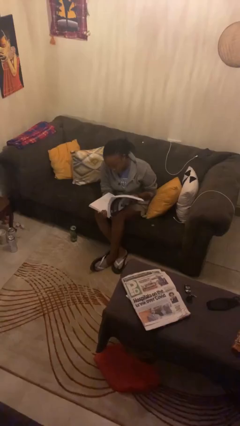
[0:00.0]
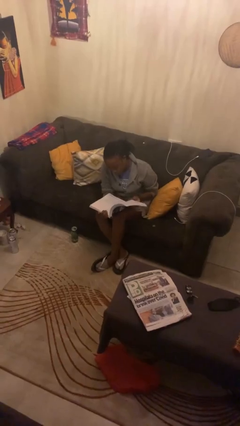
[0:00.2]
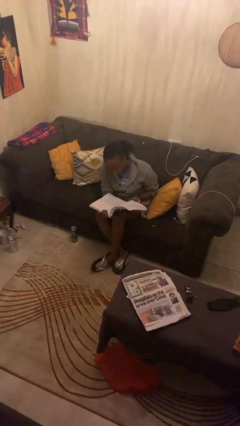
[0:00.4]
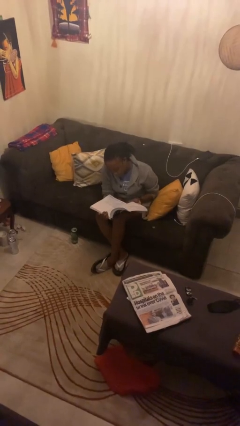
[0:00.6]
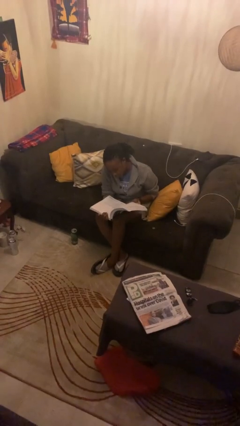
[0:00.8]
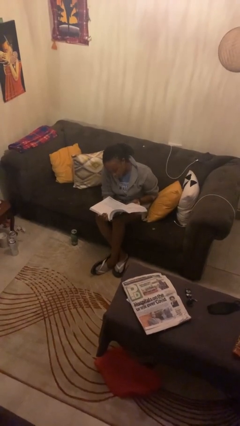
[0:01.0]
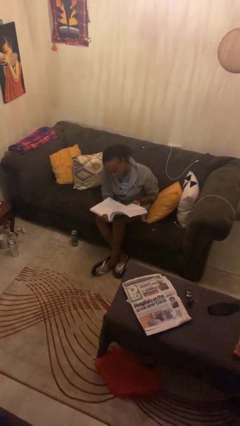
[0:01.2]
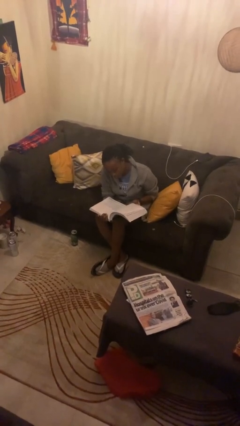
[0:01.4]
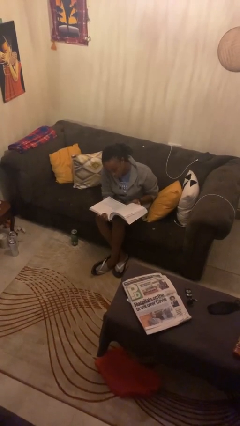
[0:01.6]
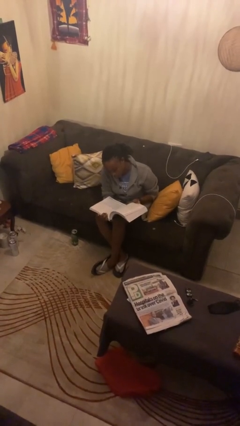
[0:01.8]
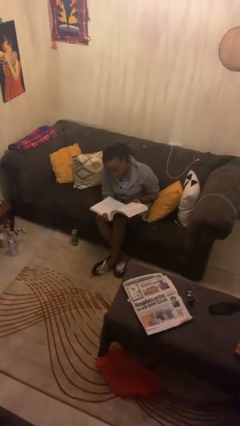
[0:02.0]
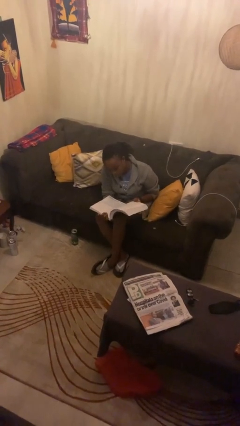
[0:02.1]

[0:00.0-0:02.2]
person reads book

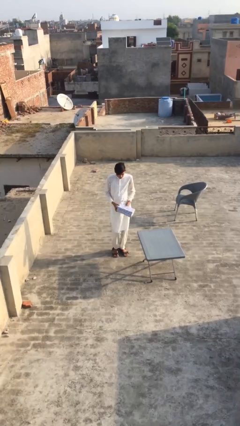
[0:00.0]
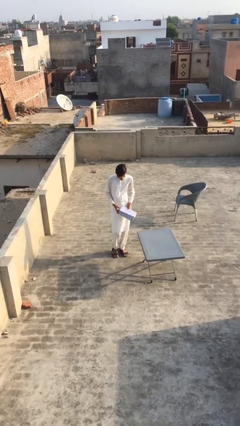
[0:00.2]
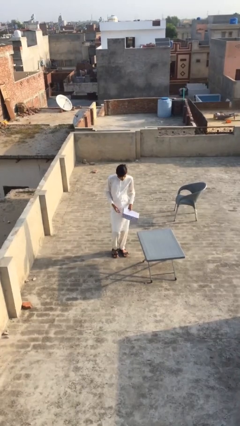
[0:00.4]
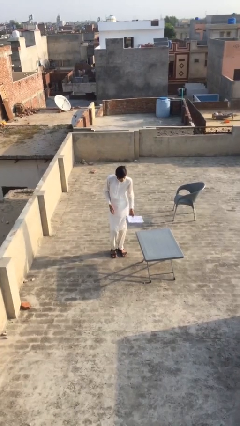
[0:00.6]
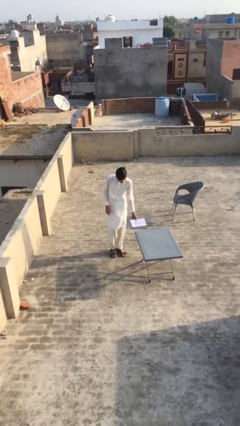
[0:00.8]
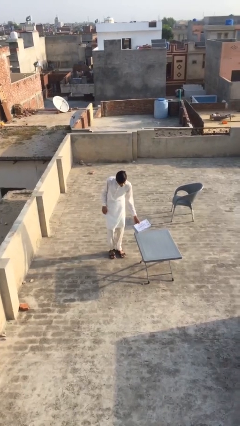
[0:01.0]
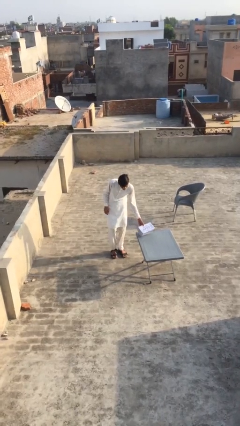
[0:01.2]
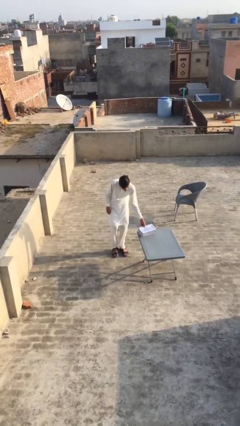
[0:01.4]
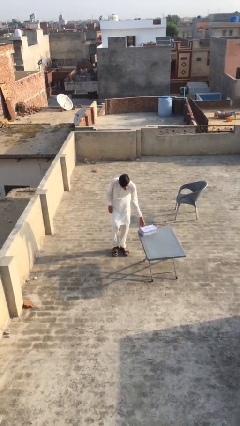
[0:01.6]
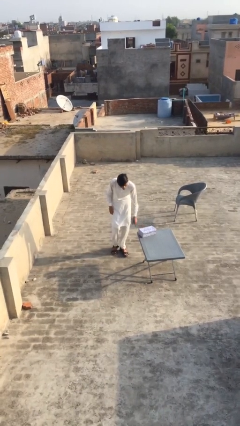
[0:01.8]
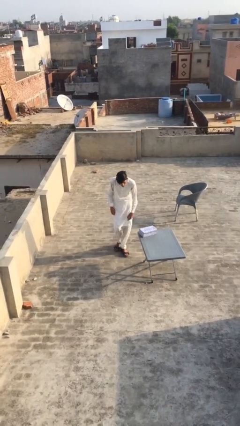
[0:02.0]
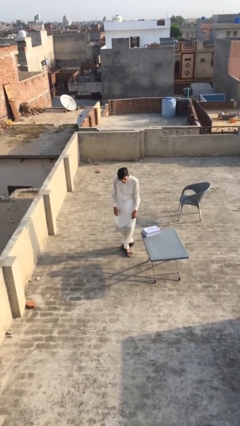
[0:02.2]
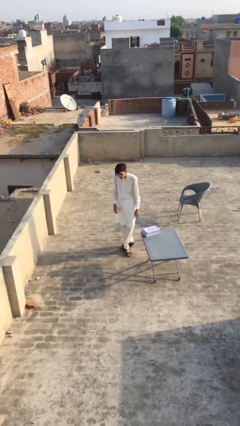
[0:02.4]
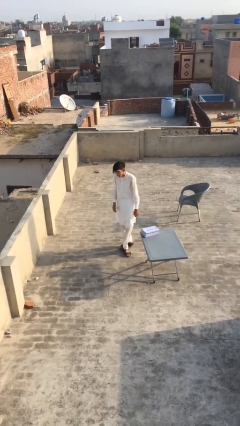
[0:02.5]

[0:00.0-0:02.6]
person puts down object on table

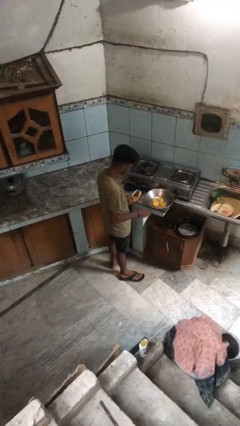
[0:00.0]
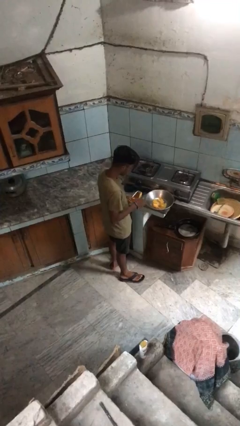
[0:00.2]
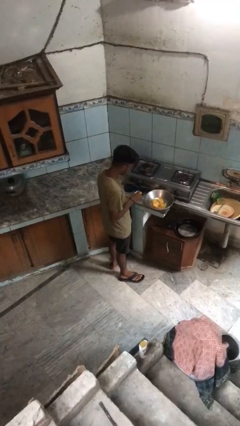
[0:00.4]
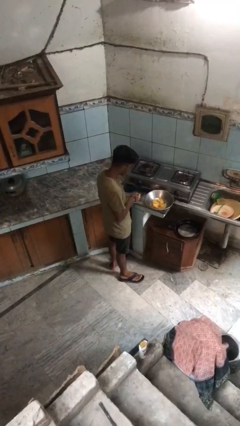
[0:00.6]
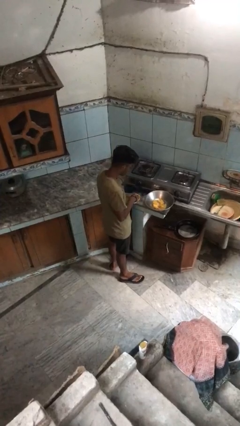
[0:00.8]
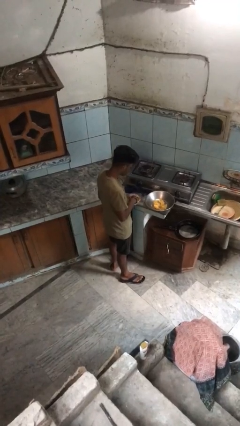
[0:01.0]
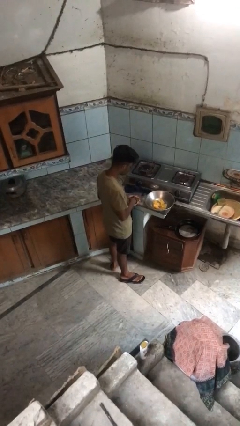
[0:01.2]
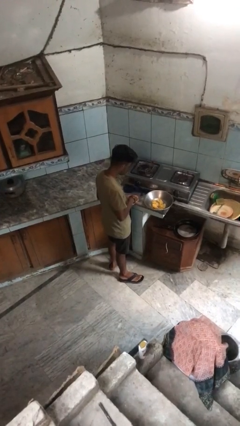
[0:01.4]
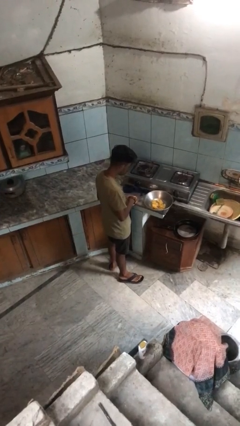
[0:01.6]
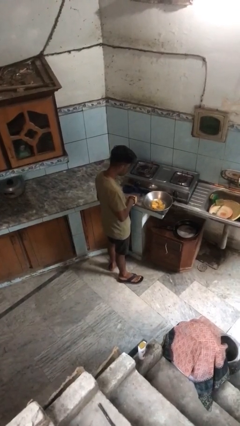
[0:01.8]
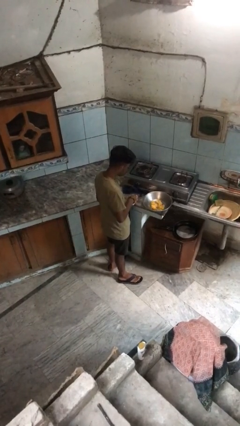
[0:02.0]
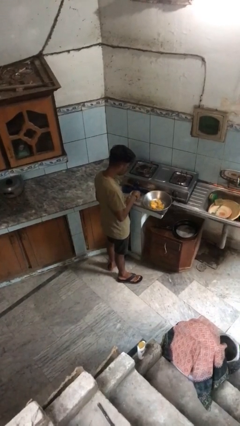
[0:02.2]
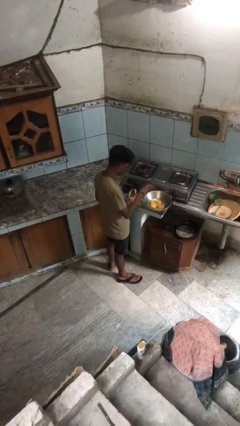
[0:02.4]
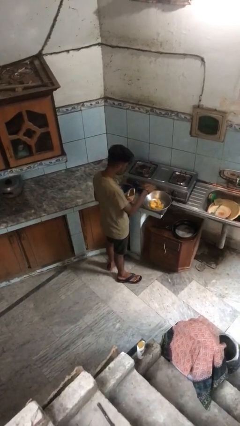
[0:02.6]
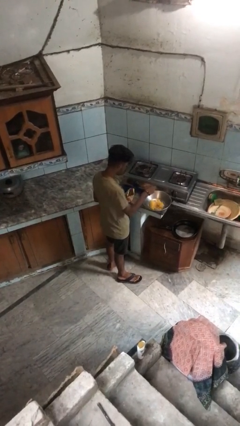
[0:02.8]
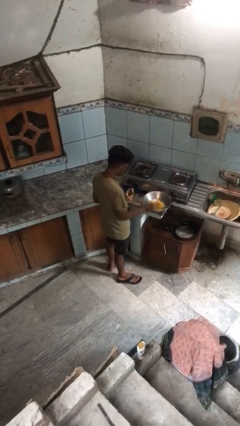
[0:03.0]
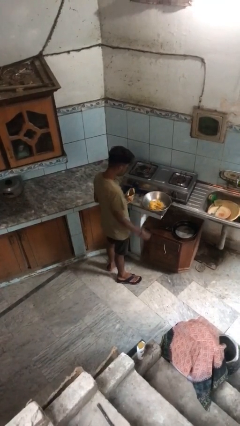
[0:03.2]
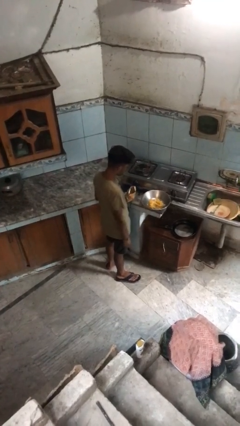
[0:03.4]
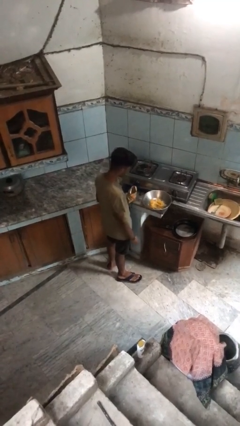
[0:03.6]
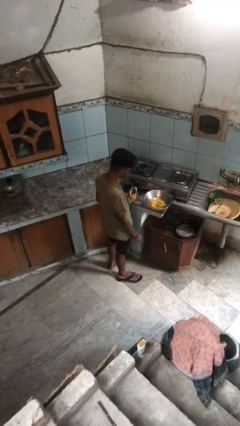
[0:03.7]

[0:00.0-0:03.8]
person pours into bowl

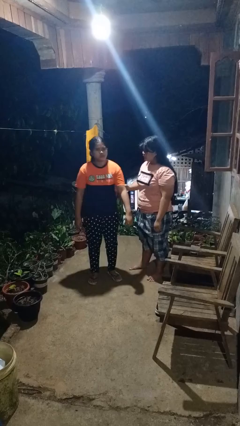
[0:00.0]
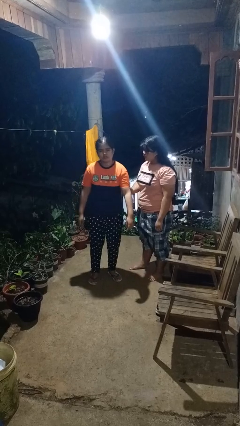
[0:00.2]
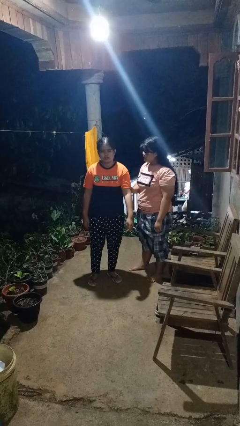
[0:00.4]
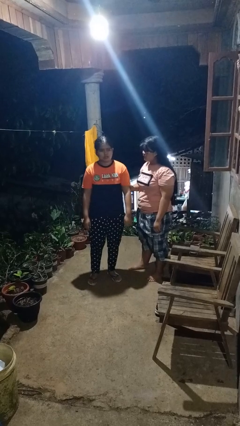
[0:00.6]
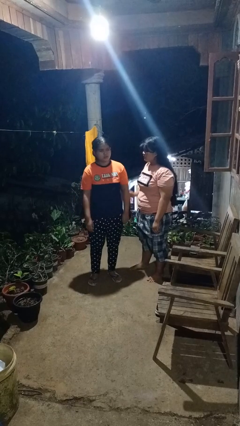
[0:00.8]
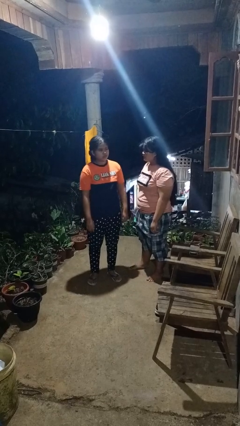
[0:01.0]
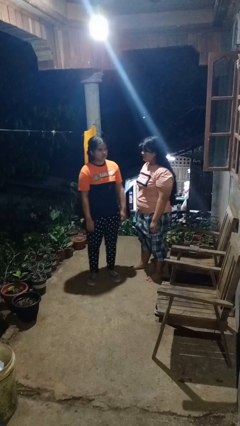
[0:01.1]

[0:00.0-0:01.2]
person grabs person by bicep

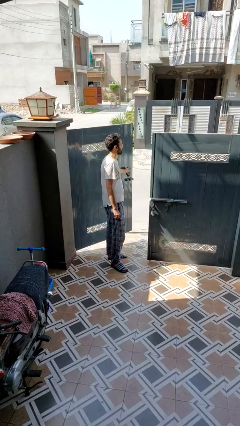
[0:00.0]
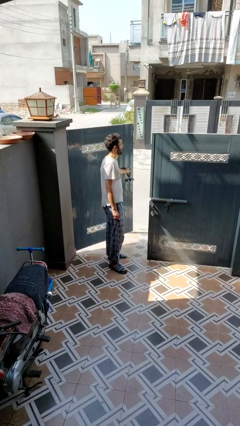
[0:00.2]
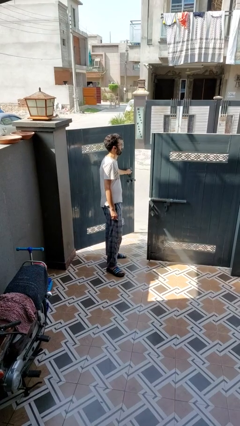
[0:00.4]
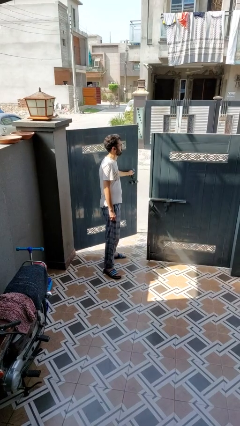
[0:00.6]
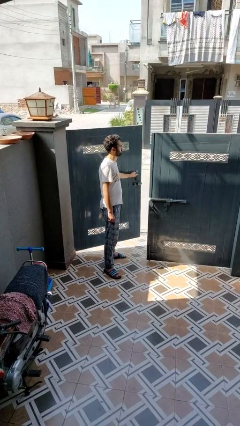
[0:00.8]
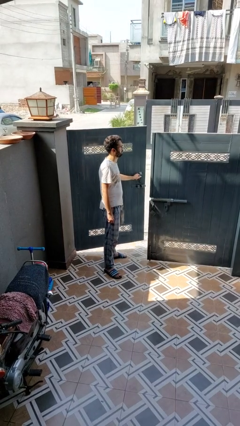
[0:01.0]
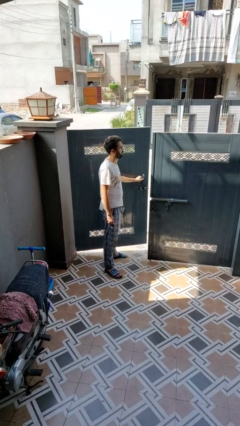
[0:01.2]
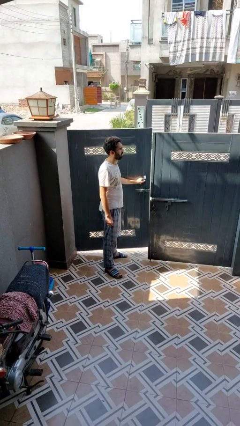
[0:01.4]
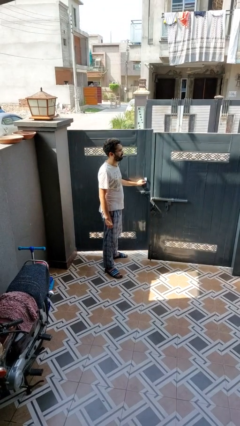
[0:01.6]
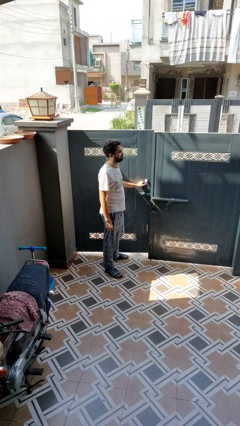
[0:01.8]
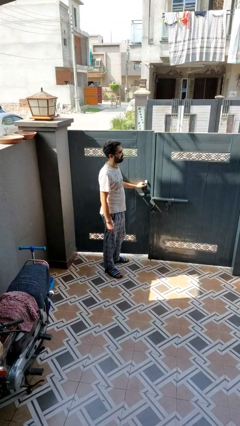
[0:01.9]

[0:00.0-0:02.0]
person closes gate

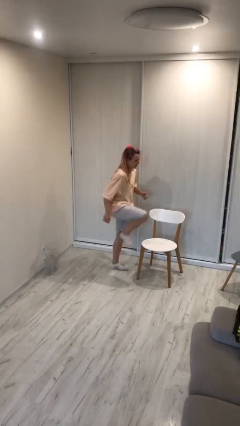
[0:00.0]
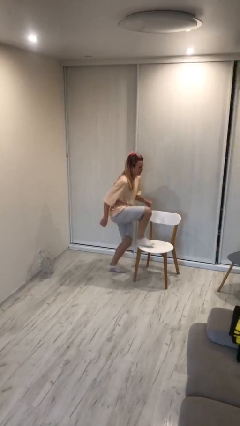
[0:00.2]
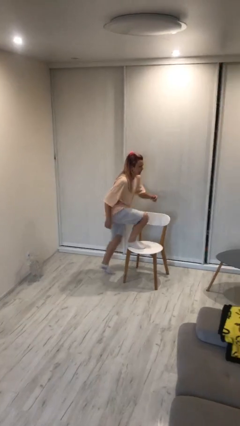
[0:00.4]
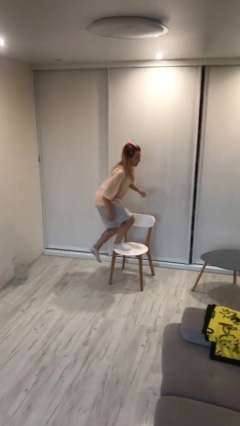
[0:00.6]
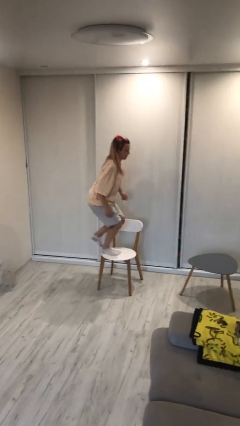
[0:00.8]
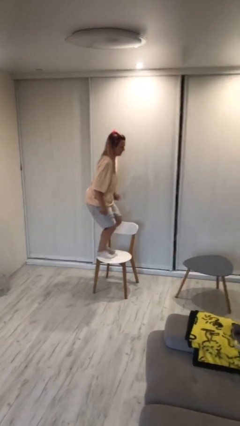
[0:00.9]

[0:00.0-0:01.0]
person climbs on chair

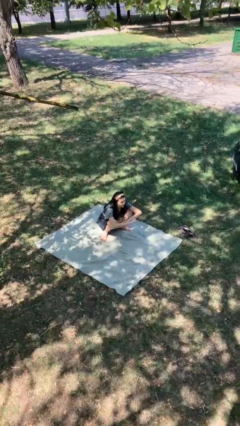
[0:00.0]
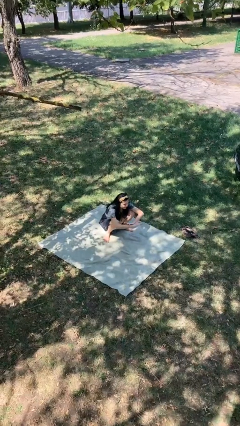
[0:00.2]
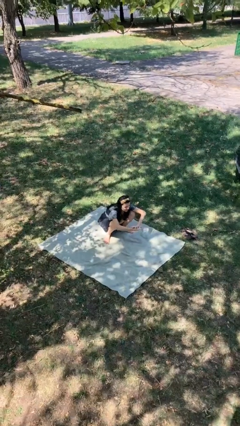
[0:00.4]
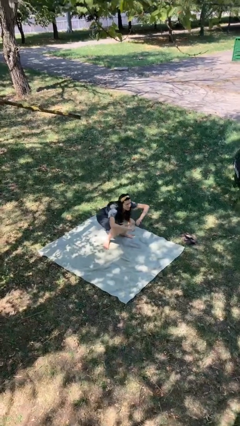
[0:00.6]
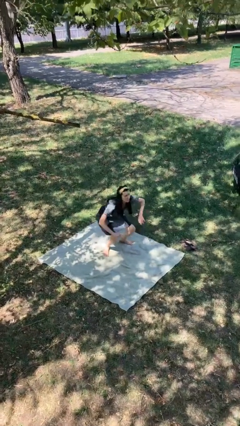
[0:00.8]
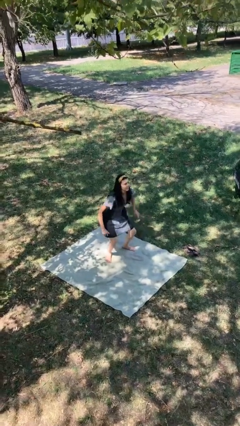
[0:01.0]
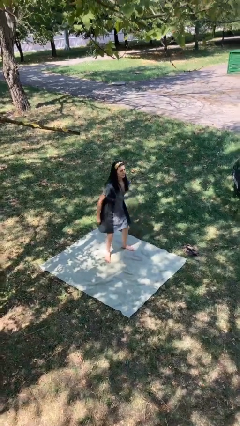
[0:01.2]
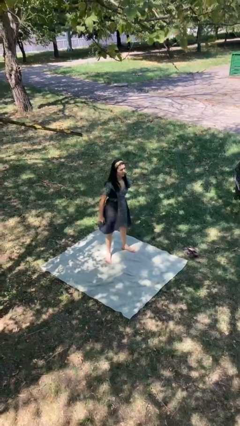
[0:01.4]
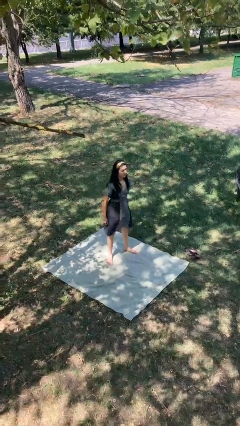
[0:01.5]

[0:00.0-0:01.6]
person stands up

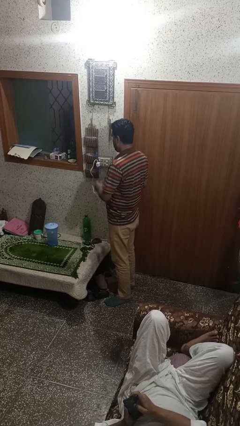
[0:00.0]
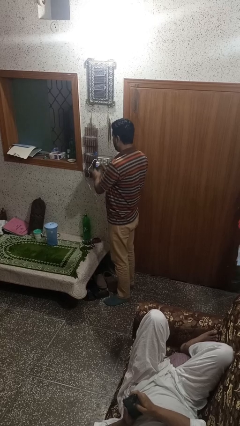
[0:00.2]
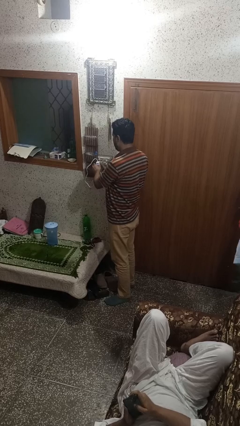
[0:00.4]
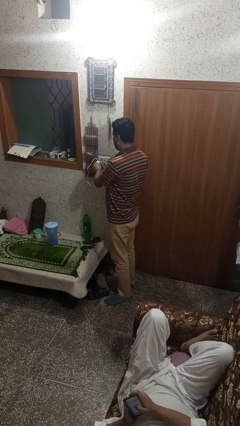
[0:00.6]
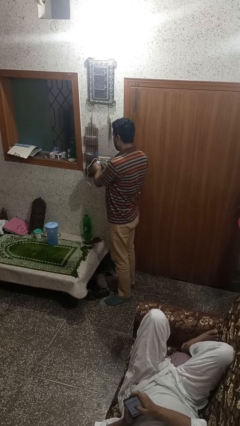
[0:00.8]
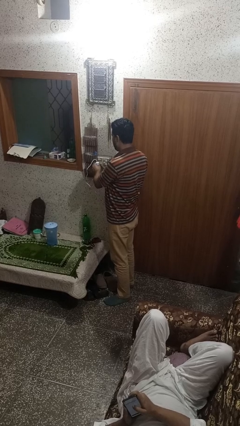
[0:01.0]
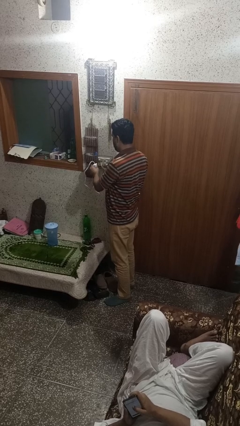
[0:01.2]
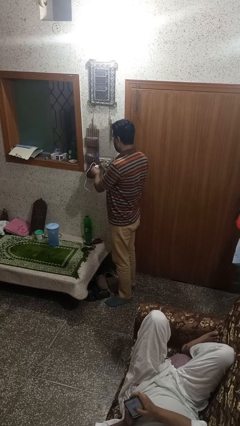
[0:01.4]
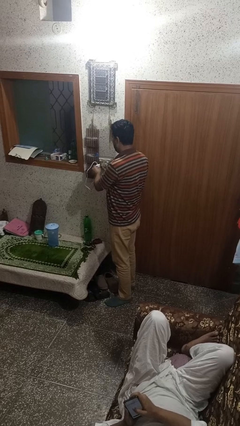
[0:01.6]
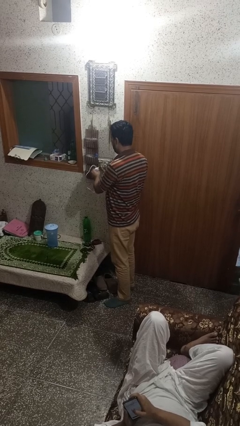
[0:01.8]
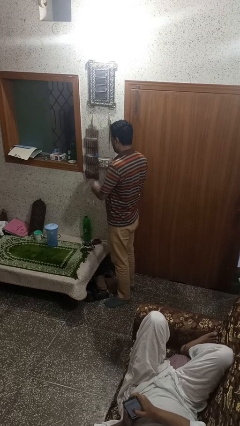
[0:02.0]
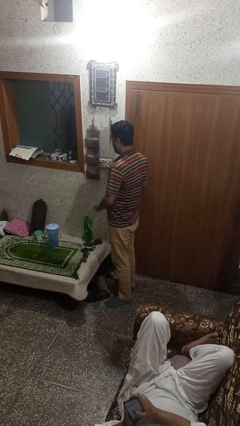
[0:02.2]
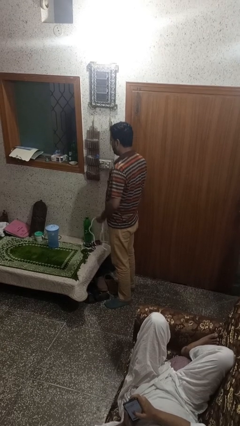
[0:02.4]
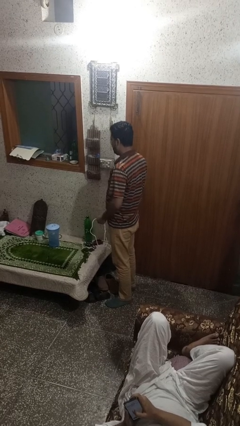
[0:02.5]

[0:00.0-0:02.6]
person unplugs from electrical socket
